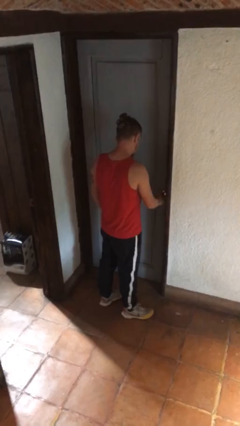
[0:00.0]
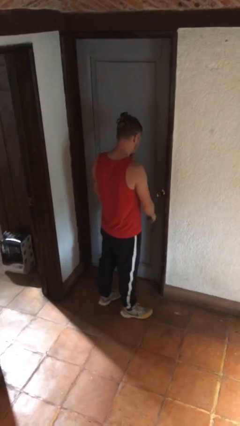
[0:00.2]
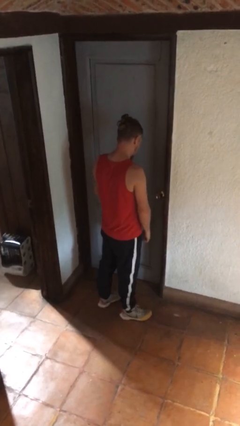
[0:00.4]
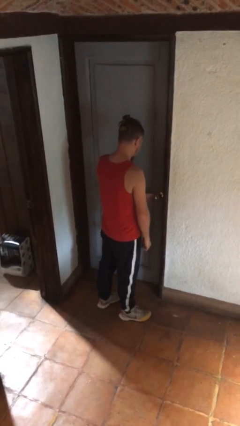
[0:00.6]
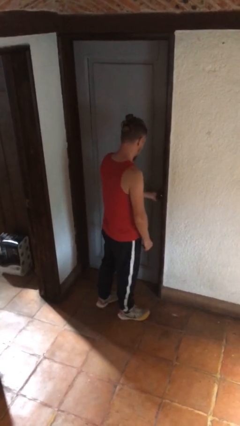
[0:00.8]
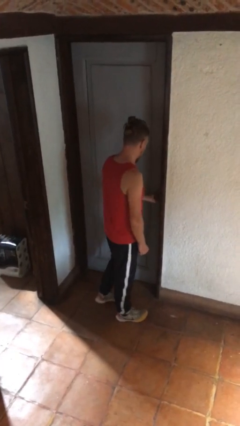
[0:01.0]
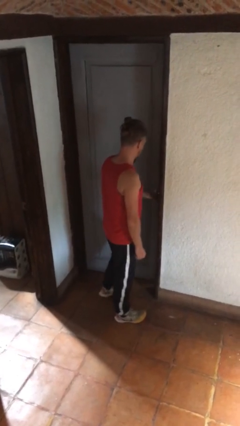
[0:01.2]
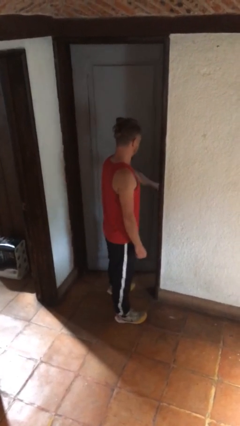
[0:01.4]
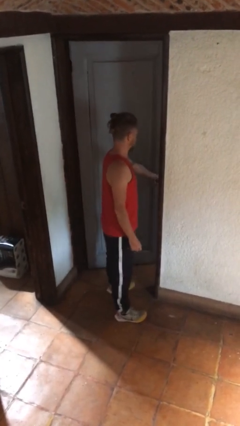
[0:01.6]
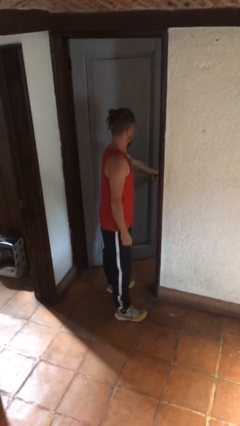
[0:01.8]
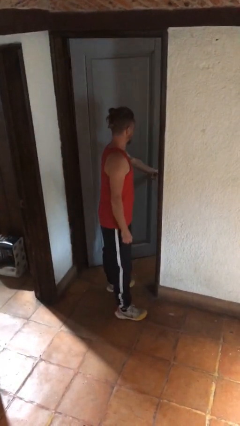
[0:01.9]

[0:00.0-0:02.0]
person opens facility door

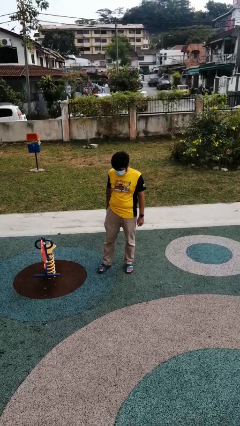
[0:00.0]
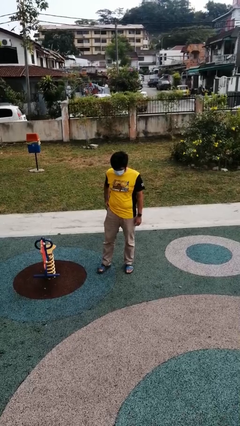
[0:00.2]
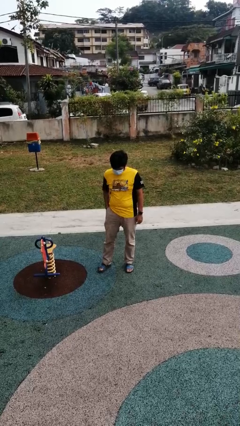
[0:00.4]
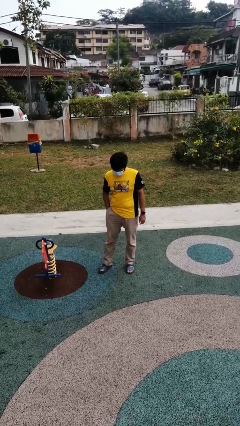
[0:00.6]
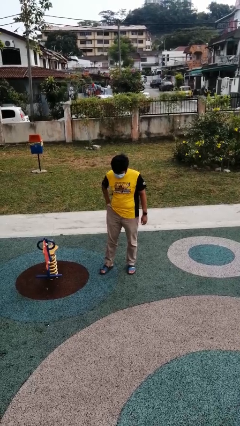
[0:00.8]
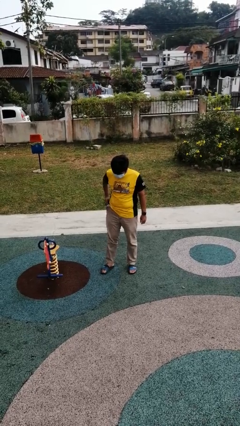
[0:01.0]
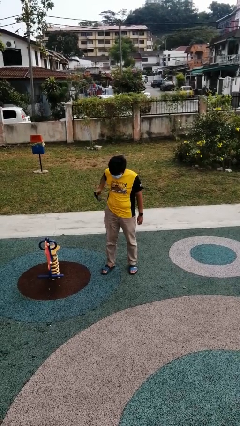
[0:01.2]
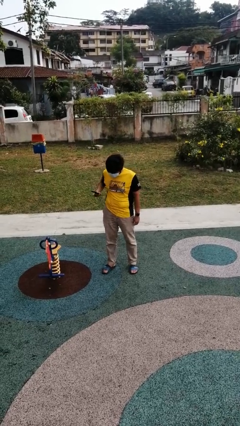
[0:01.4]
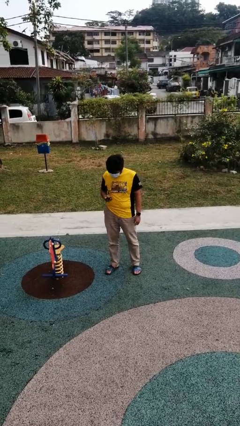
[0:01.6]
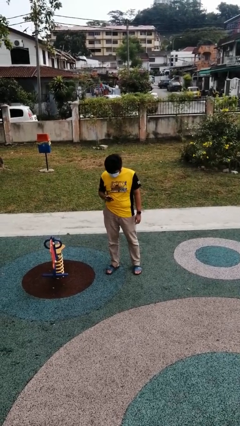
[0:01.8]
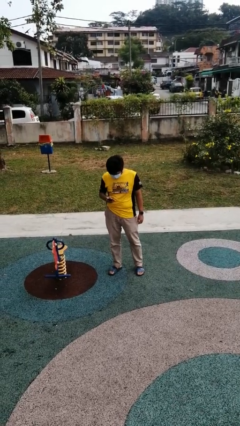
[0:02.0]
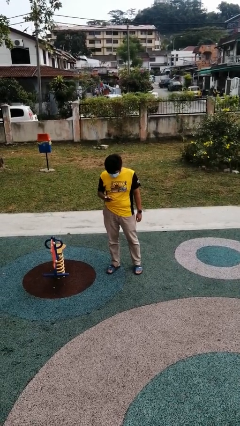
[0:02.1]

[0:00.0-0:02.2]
person takes phone from pocket

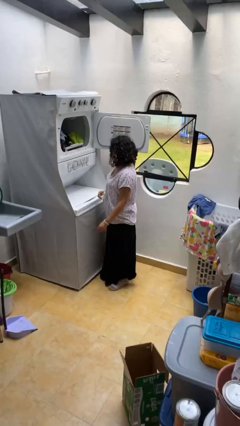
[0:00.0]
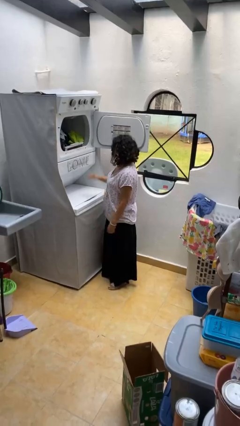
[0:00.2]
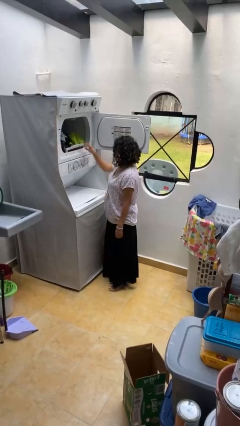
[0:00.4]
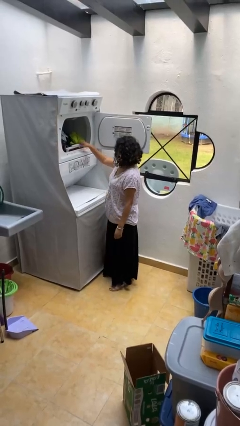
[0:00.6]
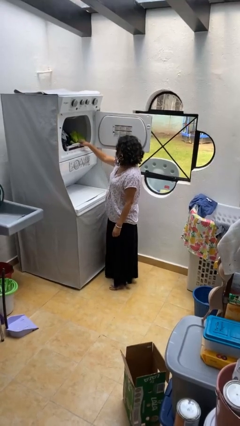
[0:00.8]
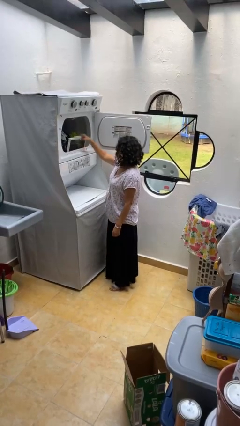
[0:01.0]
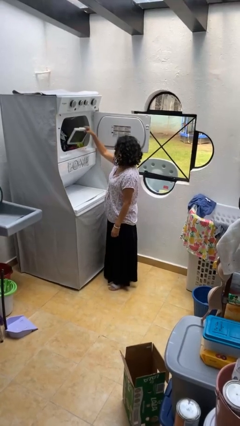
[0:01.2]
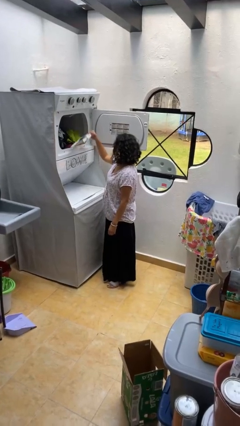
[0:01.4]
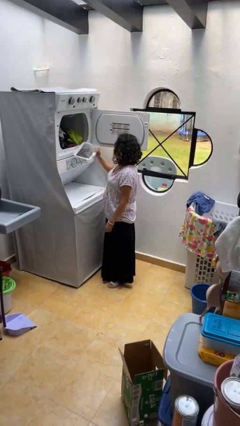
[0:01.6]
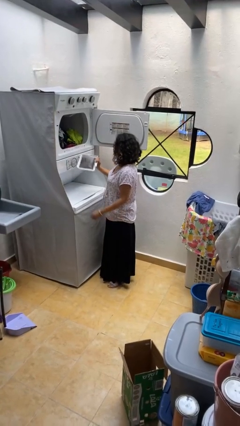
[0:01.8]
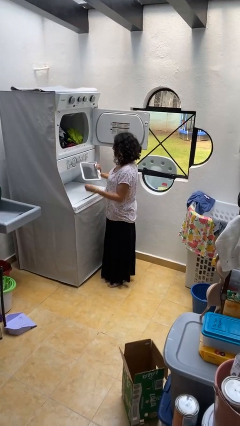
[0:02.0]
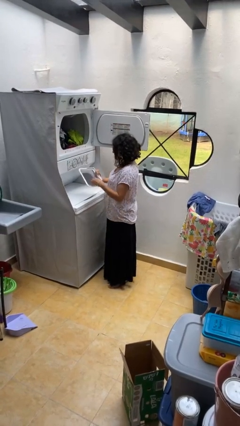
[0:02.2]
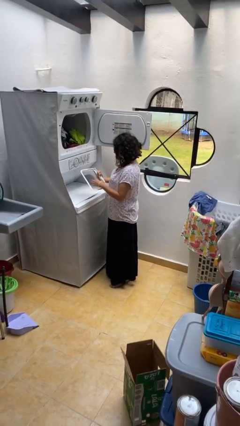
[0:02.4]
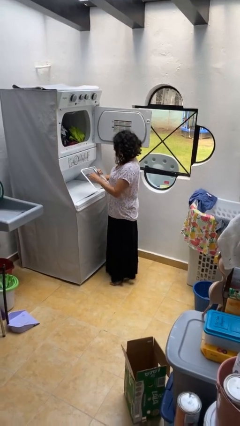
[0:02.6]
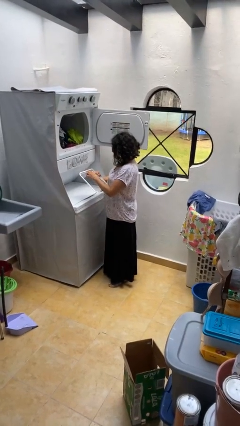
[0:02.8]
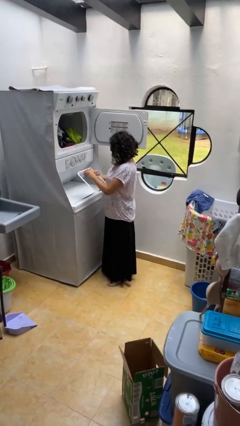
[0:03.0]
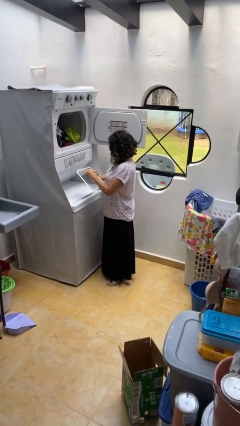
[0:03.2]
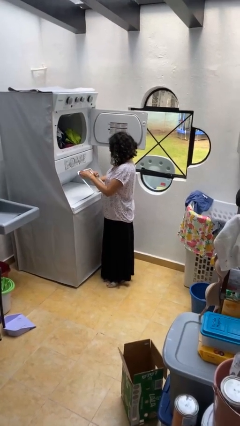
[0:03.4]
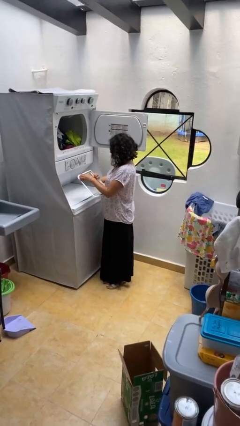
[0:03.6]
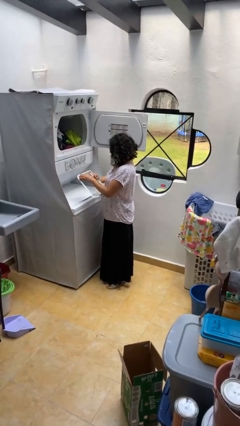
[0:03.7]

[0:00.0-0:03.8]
person cleans dryer lint trap

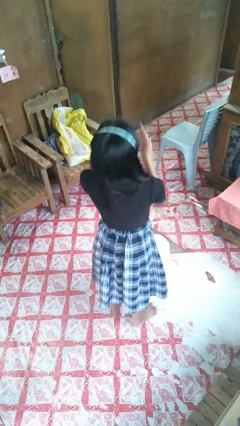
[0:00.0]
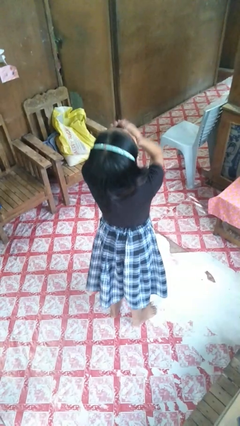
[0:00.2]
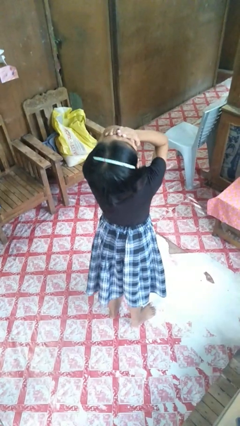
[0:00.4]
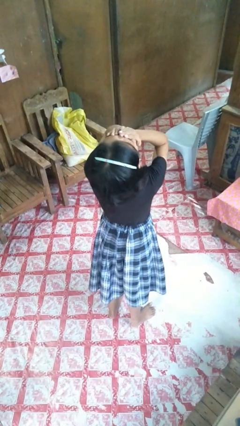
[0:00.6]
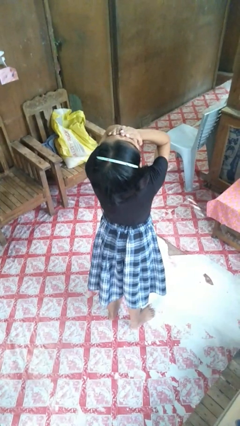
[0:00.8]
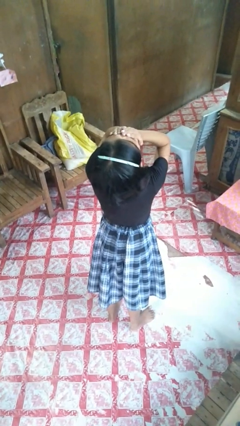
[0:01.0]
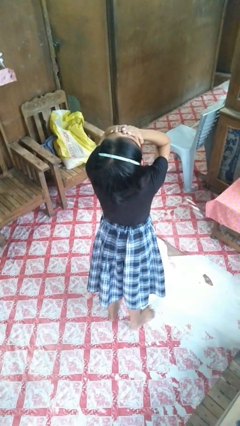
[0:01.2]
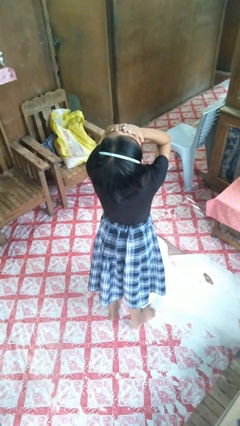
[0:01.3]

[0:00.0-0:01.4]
person covers face with hands

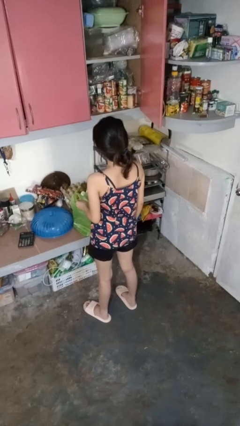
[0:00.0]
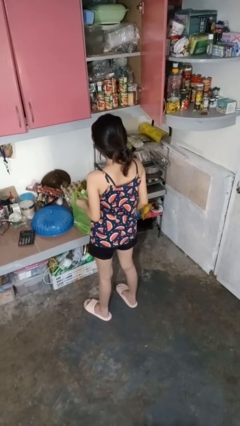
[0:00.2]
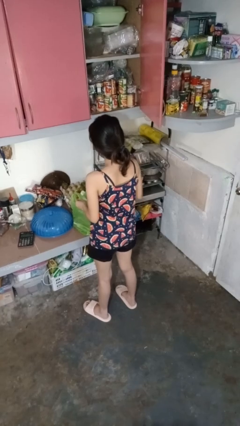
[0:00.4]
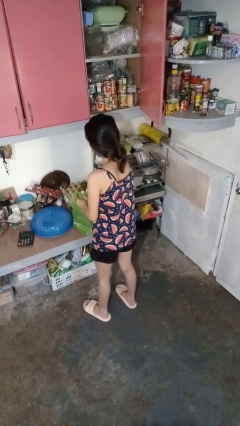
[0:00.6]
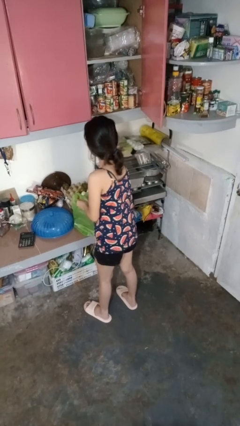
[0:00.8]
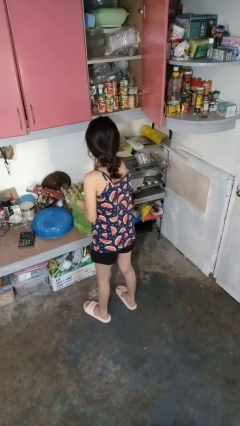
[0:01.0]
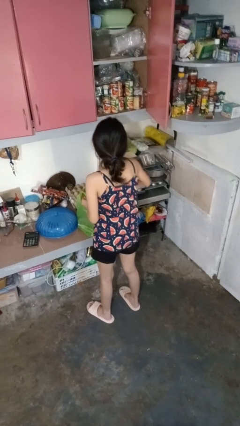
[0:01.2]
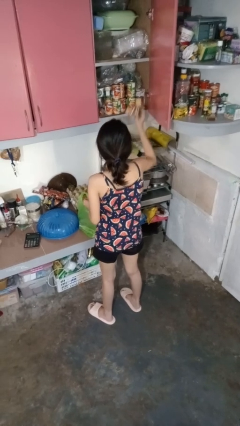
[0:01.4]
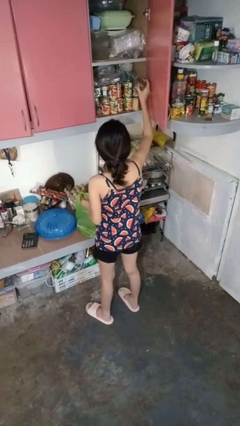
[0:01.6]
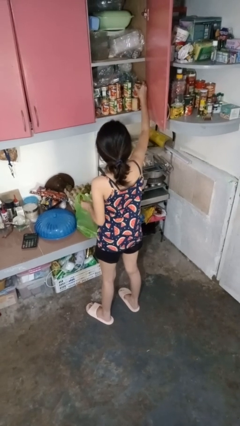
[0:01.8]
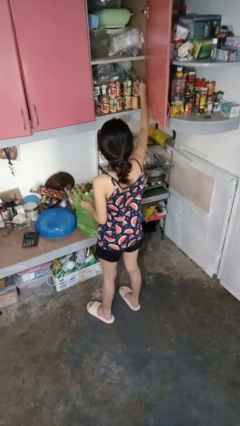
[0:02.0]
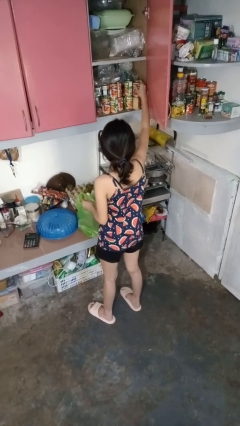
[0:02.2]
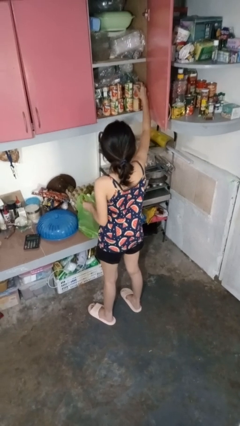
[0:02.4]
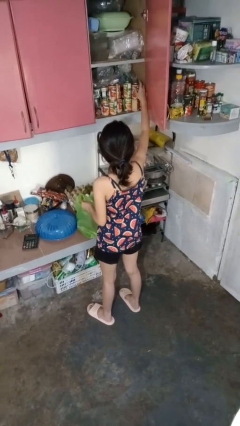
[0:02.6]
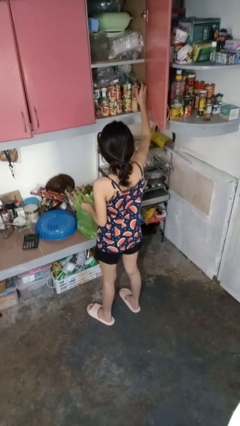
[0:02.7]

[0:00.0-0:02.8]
person loads groceries into cabinet

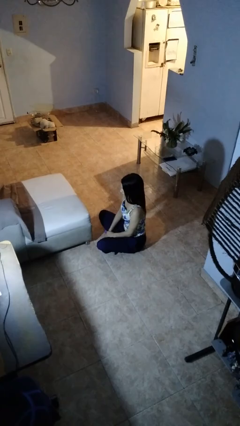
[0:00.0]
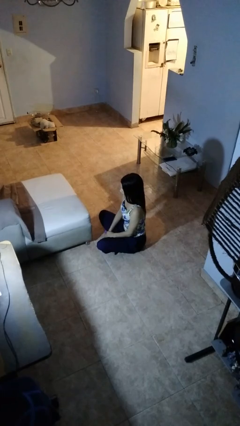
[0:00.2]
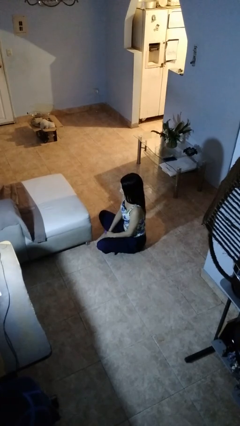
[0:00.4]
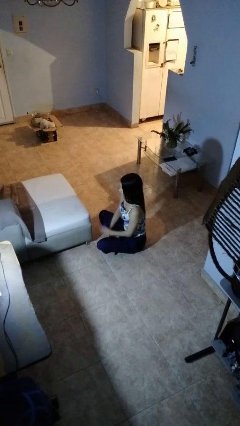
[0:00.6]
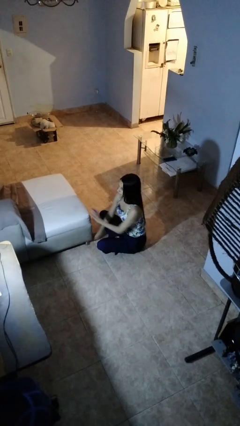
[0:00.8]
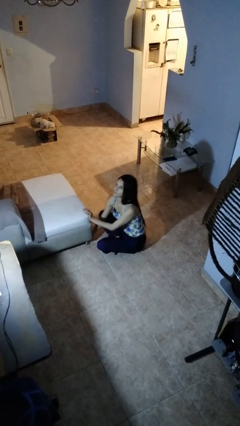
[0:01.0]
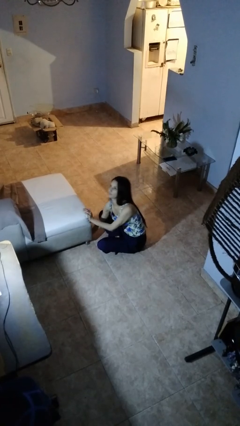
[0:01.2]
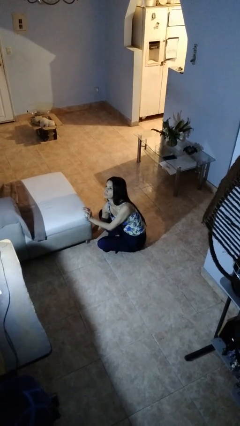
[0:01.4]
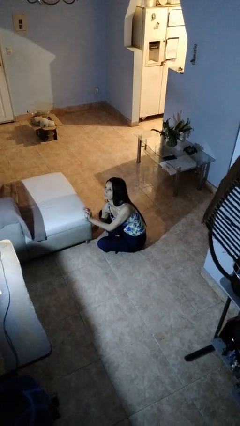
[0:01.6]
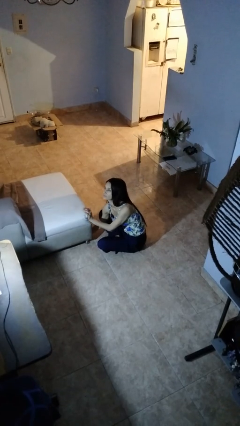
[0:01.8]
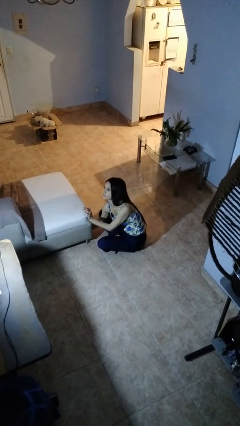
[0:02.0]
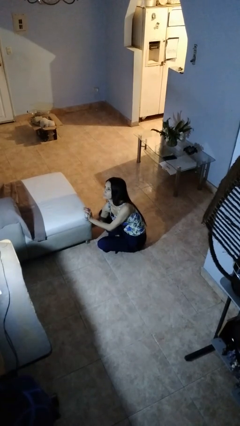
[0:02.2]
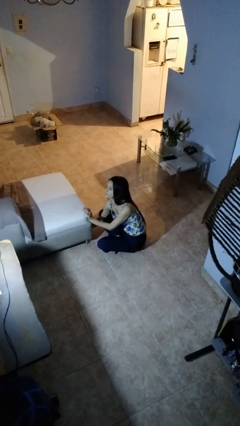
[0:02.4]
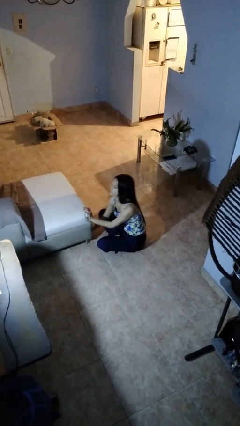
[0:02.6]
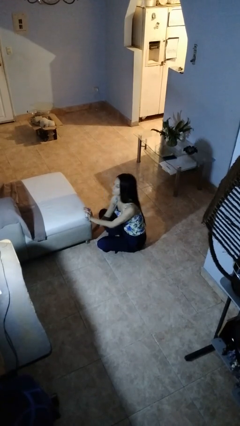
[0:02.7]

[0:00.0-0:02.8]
person searches under couch

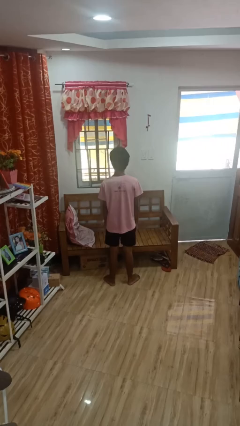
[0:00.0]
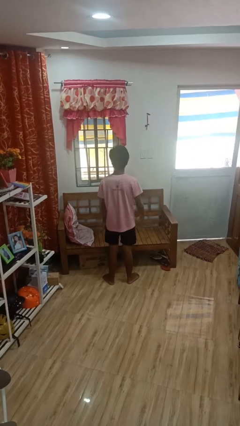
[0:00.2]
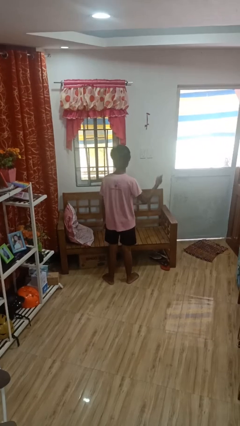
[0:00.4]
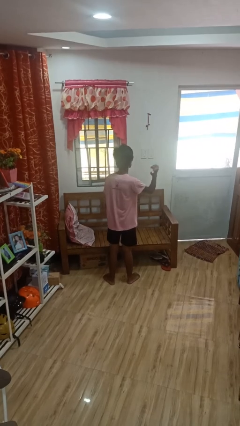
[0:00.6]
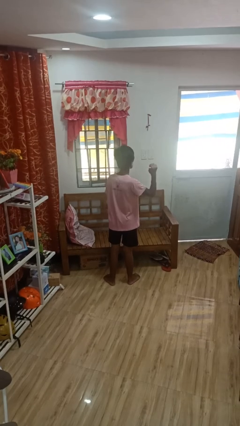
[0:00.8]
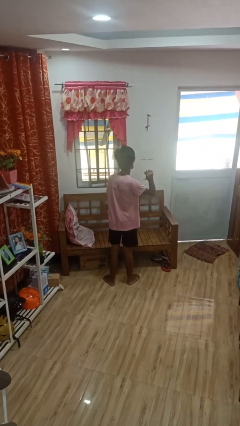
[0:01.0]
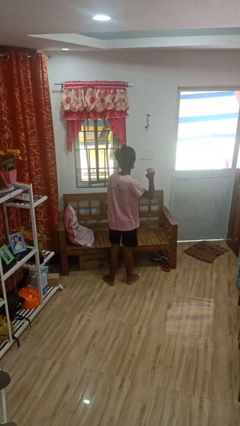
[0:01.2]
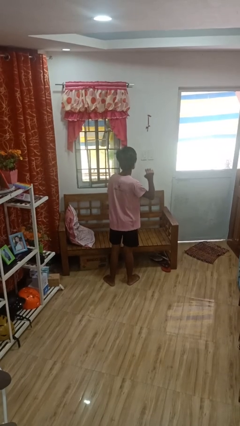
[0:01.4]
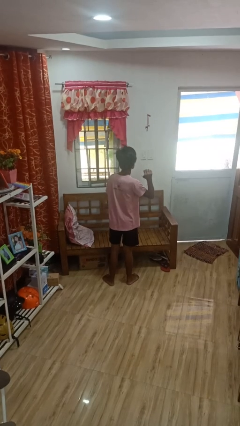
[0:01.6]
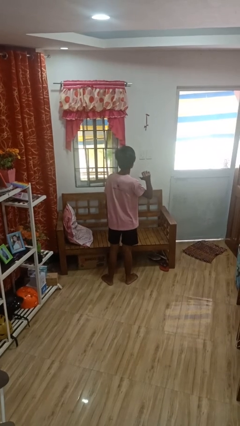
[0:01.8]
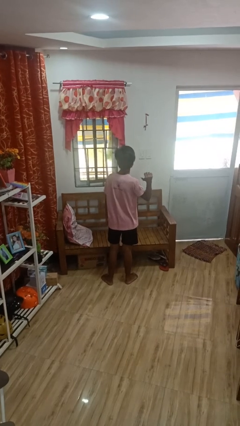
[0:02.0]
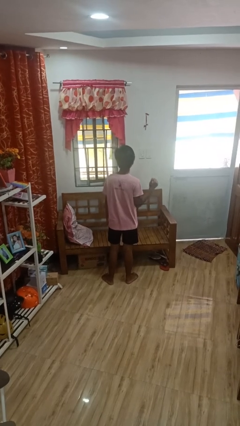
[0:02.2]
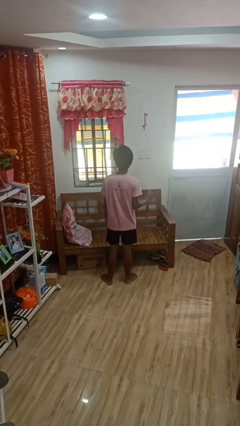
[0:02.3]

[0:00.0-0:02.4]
person gestures behind me
